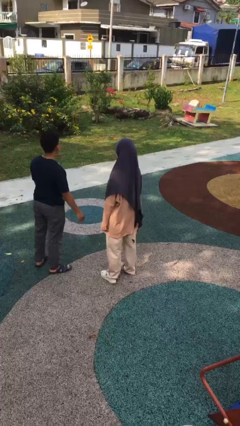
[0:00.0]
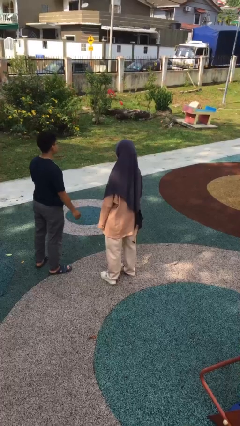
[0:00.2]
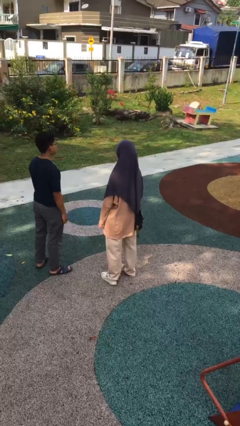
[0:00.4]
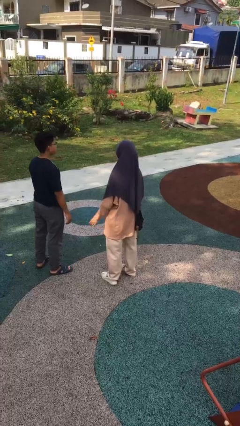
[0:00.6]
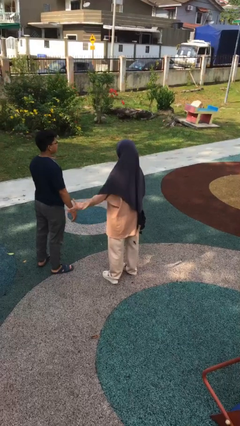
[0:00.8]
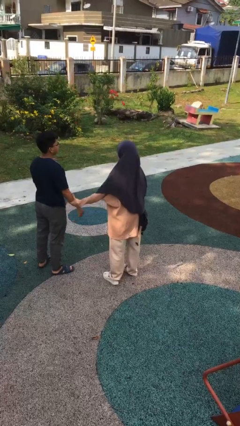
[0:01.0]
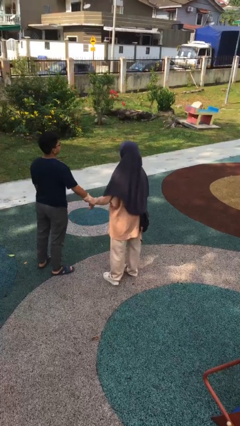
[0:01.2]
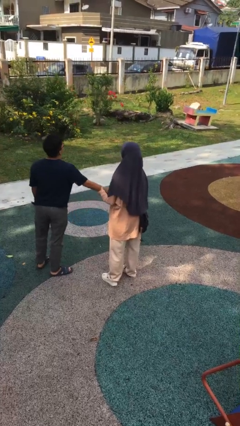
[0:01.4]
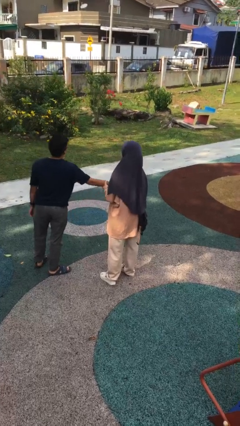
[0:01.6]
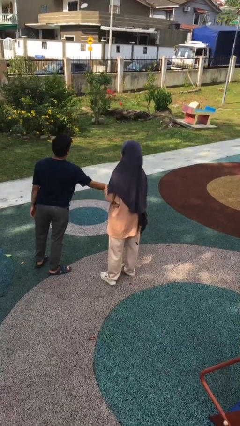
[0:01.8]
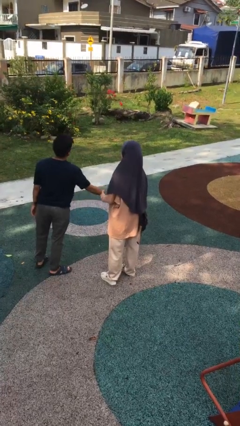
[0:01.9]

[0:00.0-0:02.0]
person grabs person by forearm

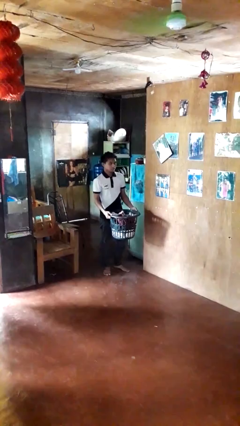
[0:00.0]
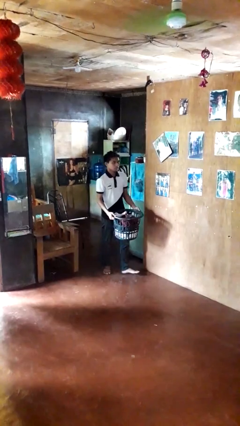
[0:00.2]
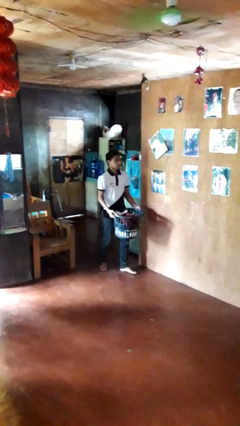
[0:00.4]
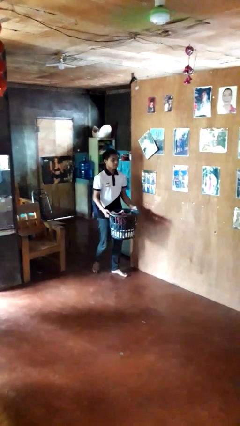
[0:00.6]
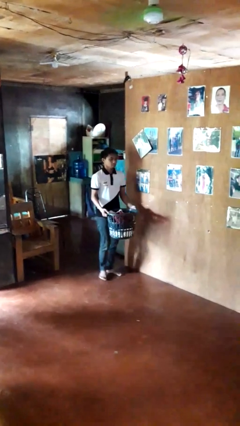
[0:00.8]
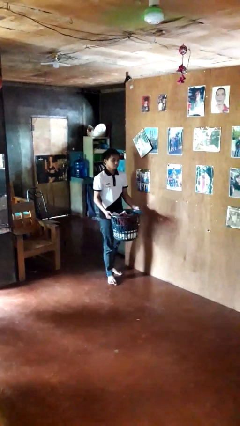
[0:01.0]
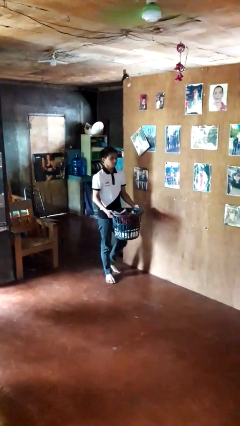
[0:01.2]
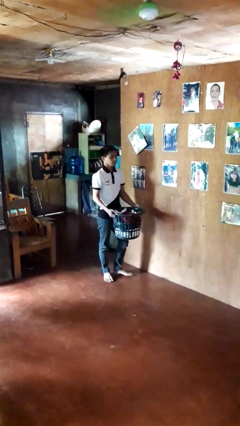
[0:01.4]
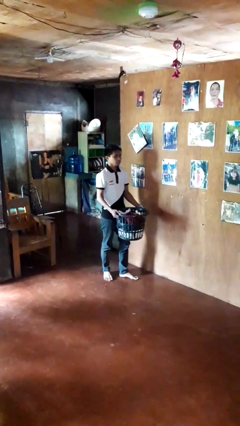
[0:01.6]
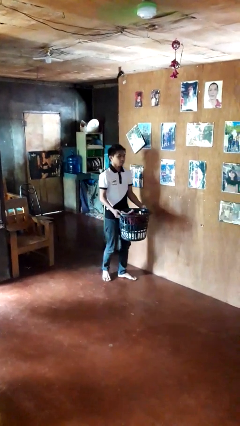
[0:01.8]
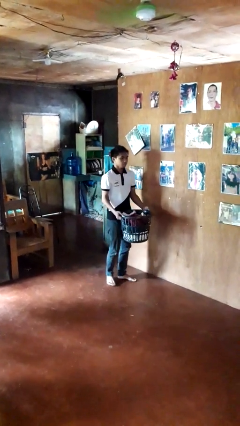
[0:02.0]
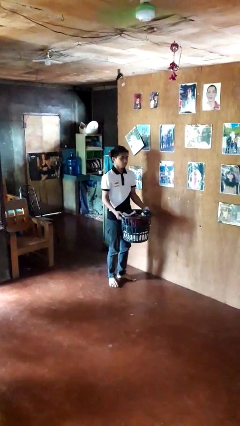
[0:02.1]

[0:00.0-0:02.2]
person carries laundry basket

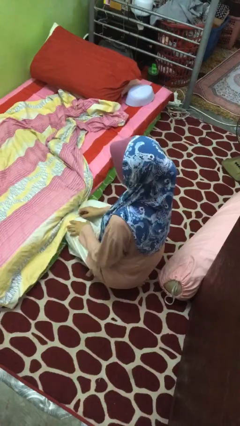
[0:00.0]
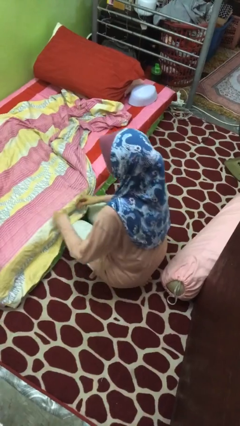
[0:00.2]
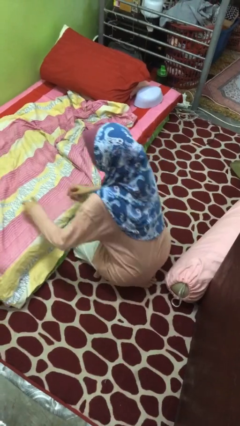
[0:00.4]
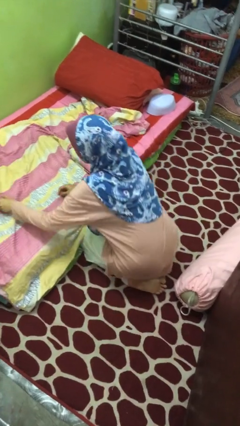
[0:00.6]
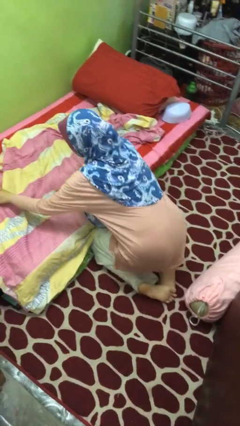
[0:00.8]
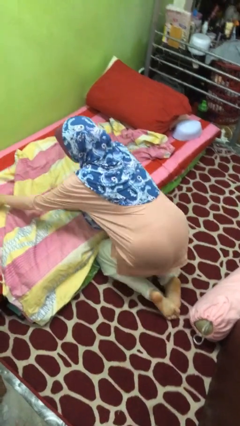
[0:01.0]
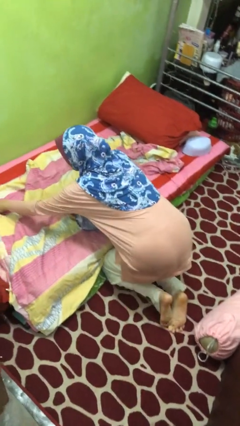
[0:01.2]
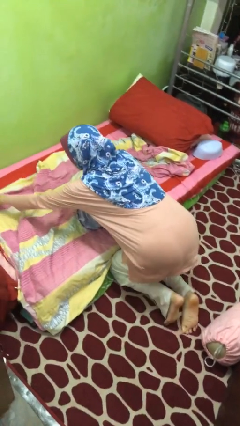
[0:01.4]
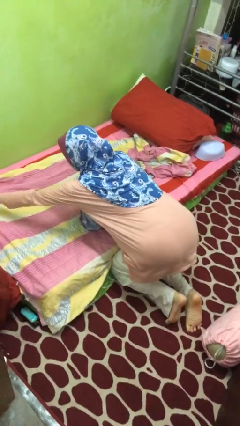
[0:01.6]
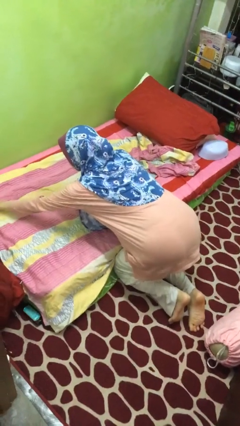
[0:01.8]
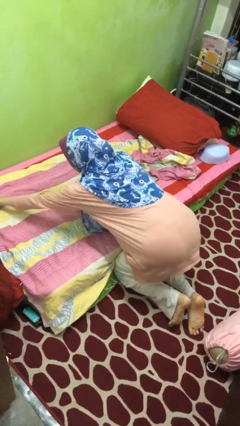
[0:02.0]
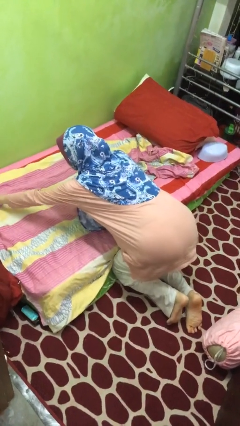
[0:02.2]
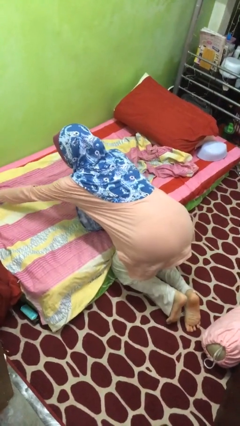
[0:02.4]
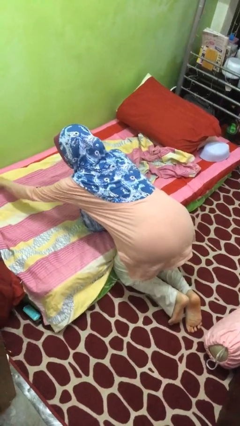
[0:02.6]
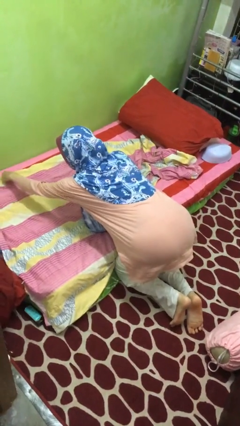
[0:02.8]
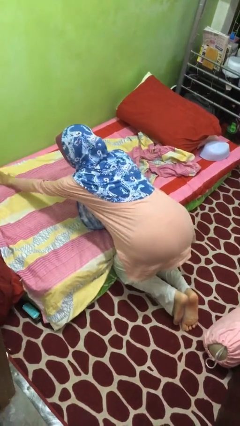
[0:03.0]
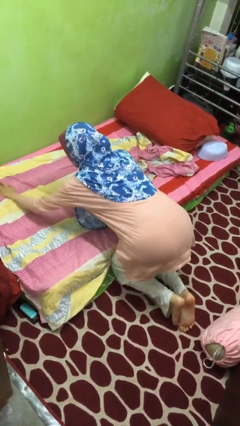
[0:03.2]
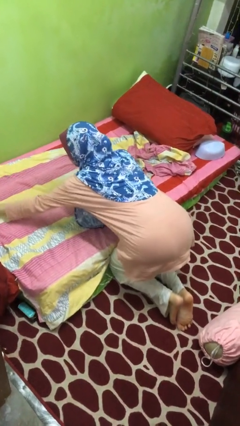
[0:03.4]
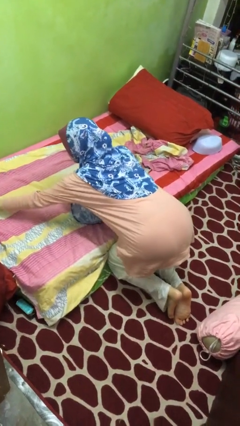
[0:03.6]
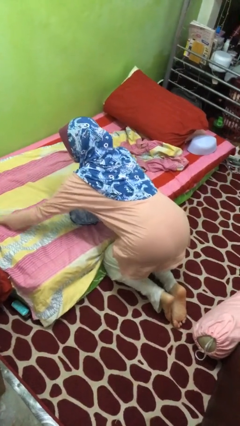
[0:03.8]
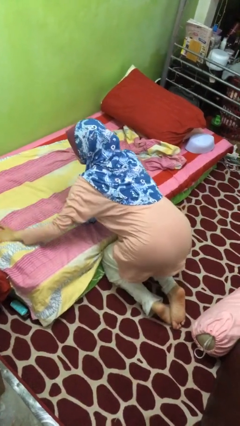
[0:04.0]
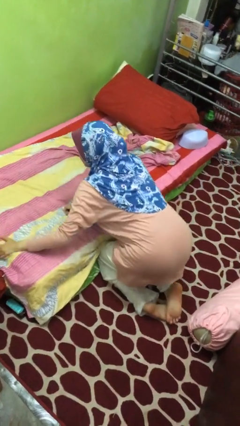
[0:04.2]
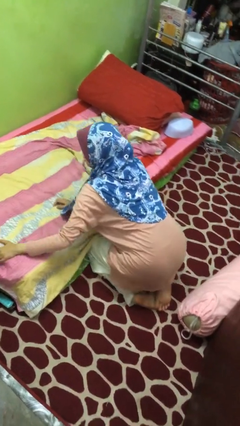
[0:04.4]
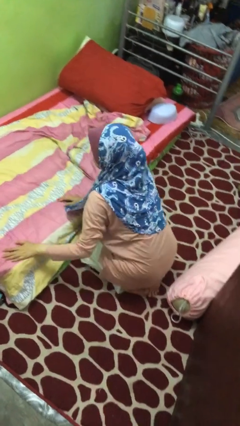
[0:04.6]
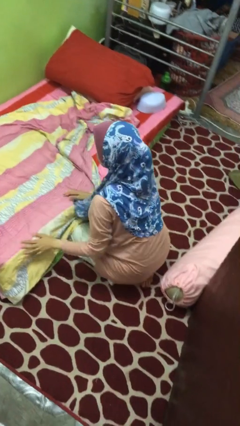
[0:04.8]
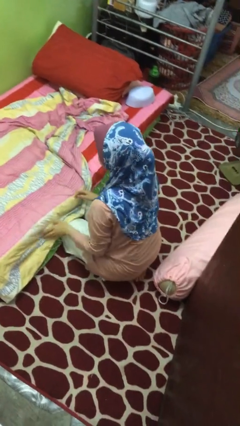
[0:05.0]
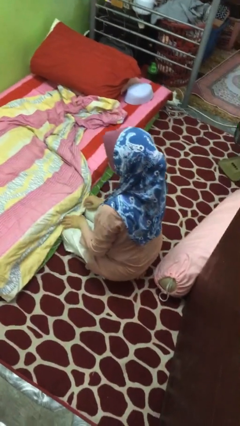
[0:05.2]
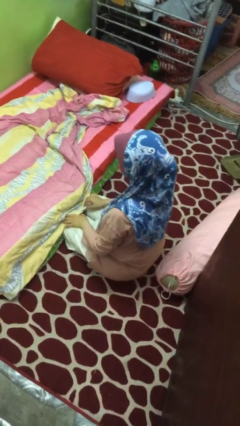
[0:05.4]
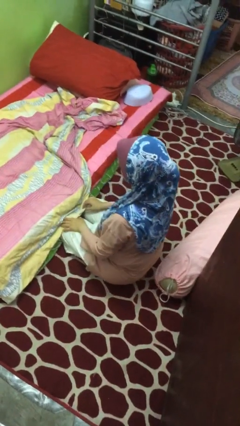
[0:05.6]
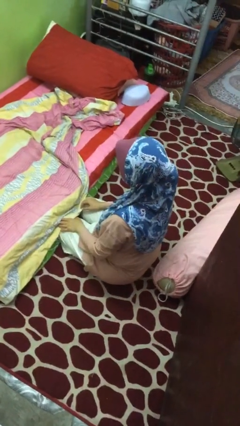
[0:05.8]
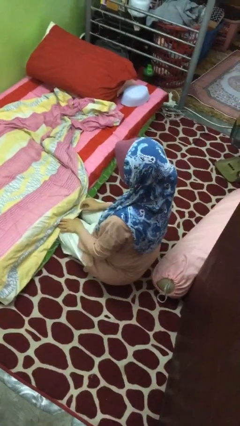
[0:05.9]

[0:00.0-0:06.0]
person makes bed

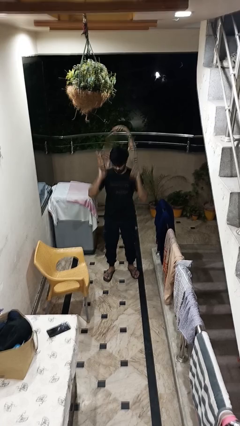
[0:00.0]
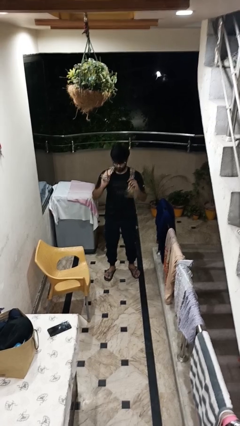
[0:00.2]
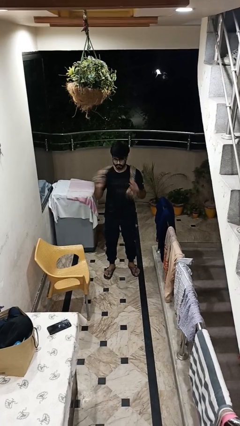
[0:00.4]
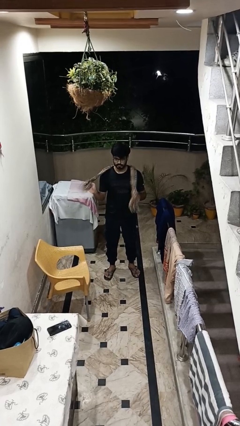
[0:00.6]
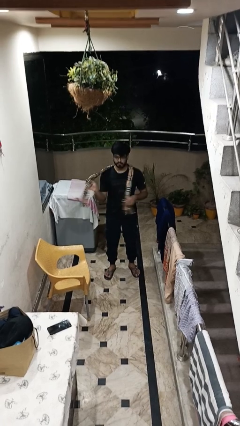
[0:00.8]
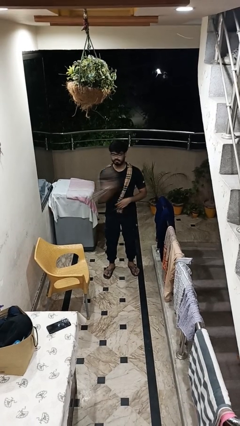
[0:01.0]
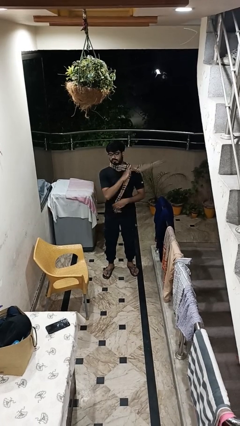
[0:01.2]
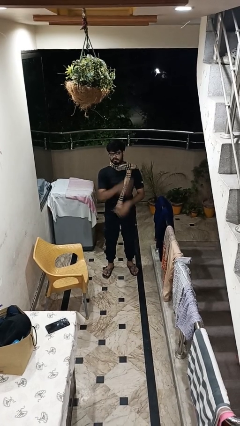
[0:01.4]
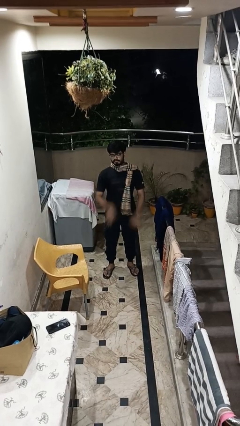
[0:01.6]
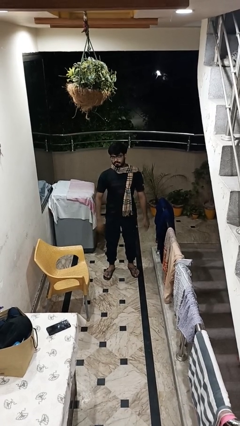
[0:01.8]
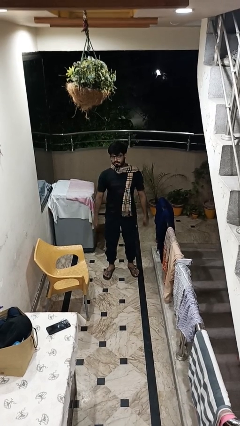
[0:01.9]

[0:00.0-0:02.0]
person puts on scarf

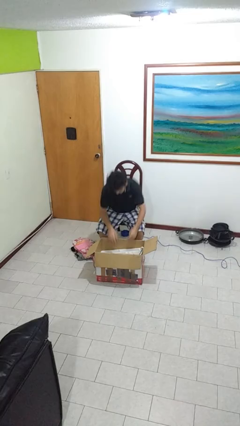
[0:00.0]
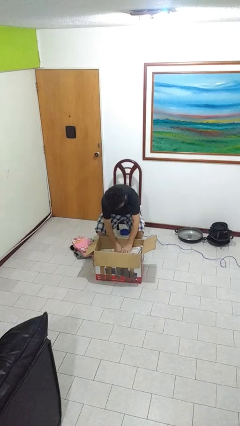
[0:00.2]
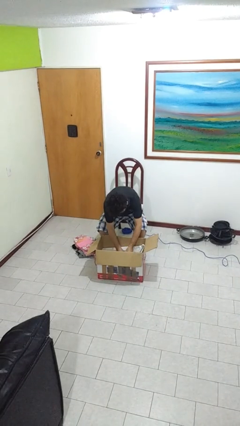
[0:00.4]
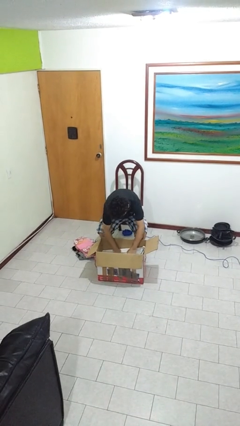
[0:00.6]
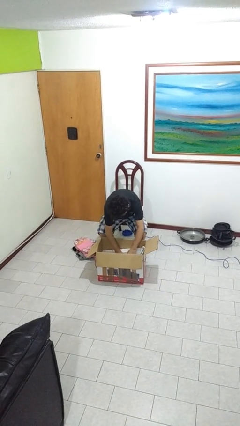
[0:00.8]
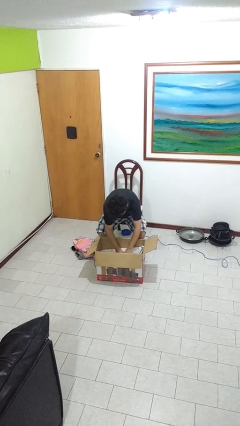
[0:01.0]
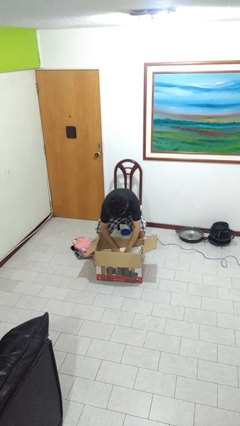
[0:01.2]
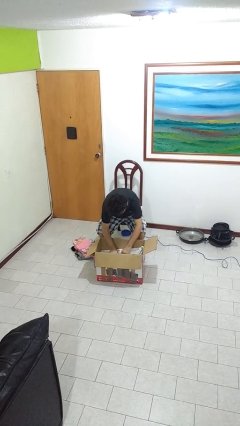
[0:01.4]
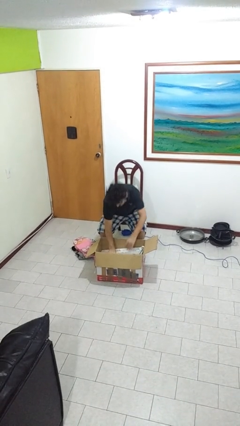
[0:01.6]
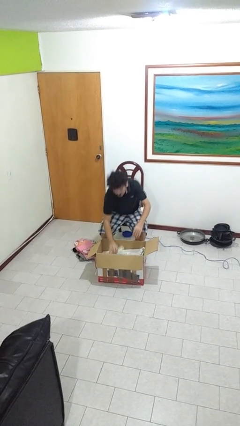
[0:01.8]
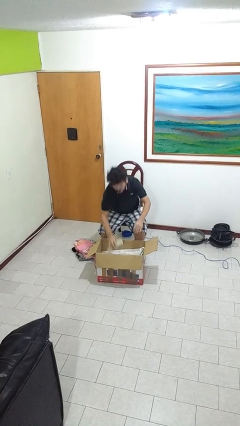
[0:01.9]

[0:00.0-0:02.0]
person searches in box

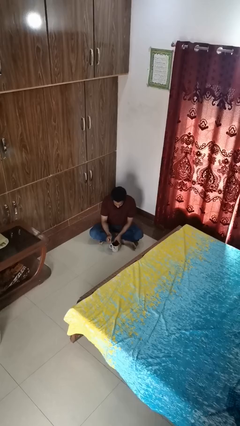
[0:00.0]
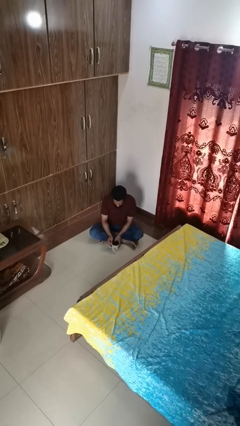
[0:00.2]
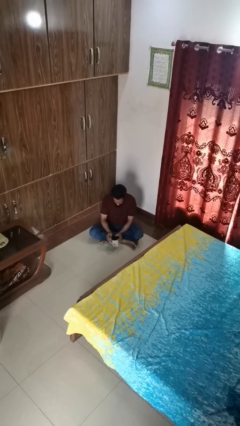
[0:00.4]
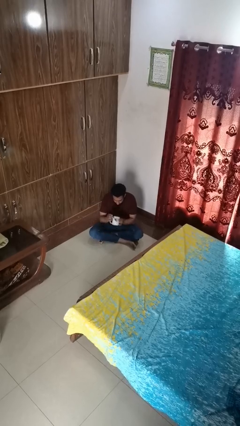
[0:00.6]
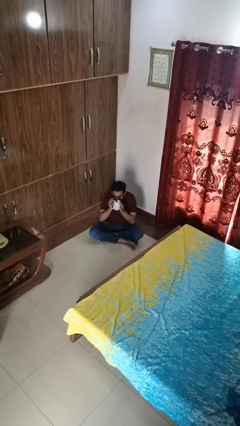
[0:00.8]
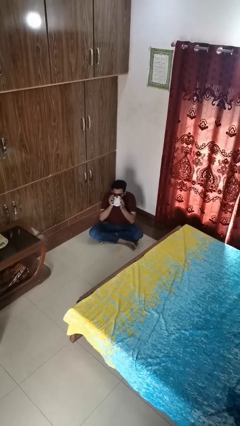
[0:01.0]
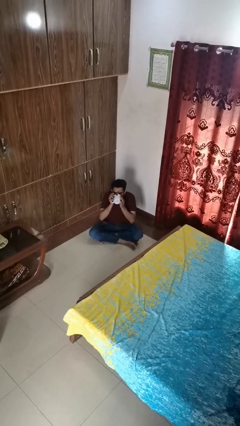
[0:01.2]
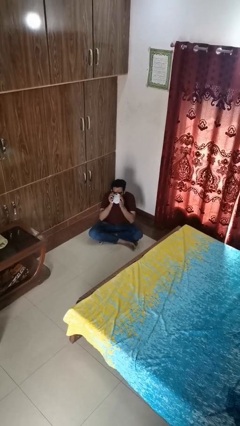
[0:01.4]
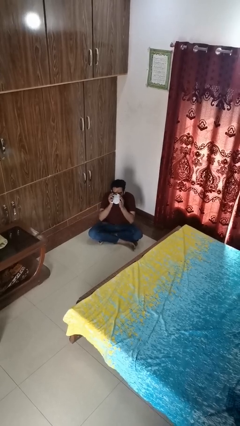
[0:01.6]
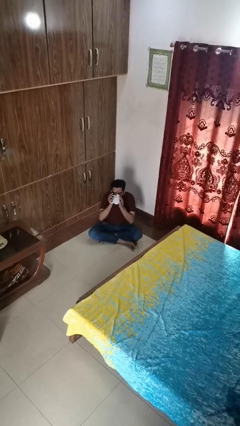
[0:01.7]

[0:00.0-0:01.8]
person drinks from mug

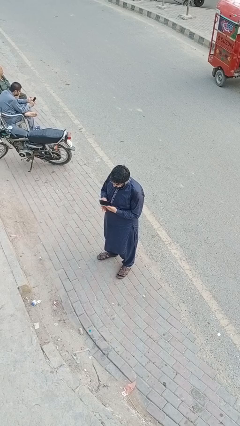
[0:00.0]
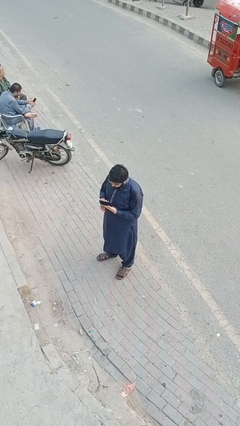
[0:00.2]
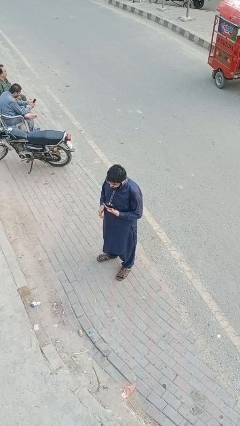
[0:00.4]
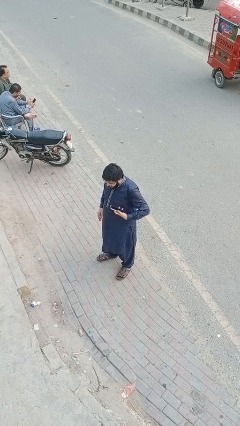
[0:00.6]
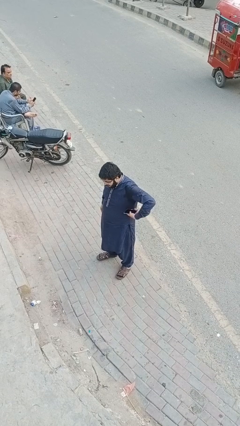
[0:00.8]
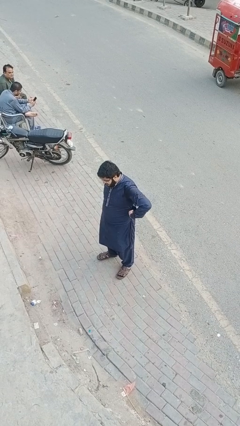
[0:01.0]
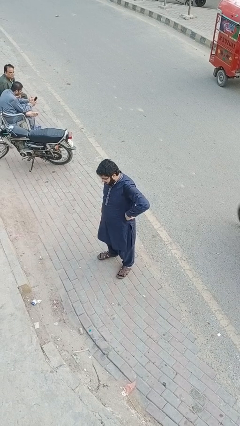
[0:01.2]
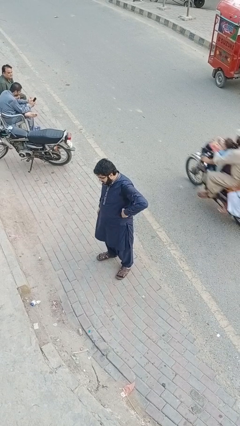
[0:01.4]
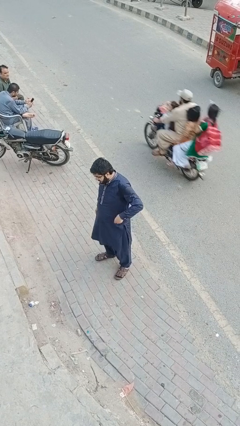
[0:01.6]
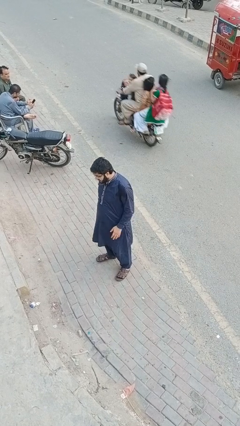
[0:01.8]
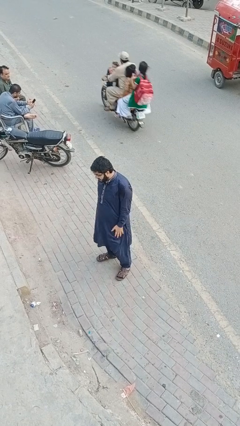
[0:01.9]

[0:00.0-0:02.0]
person puts phone into pocket
